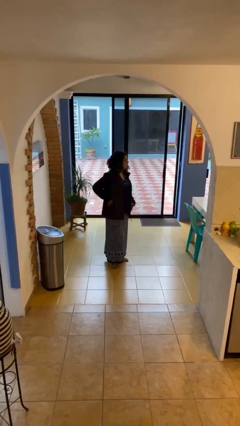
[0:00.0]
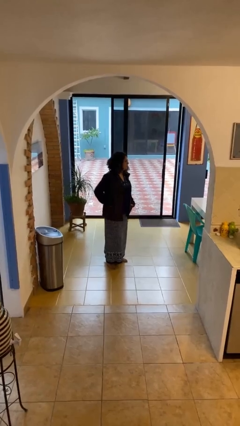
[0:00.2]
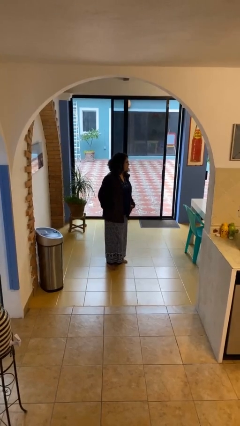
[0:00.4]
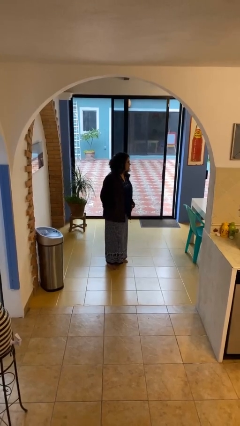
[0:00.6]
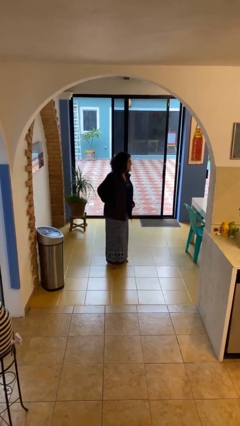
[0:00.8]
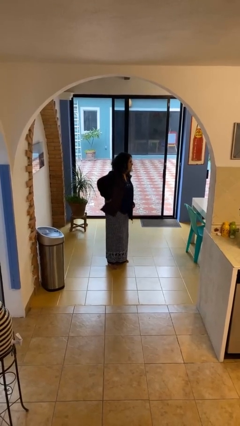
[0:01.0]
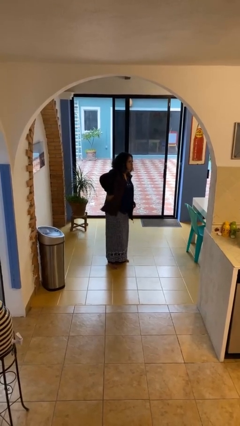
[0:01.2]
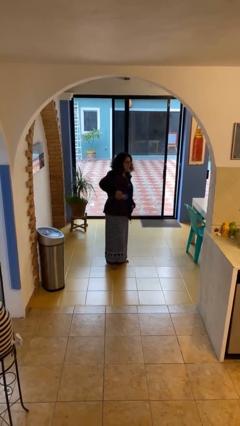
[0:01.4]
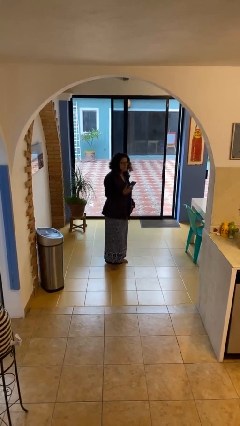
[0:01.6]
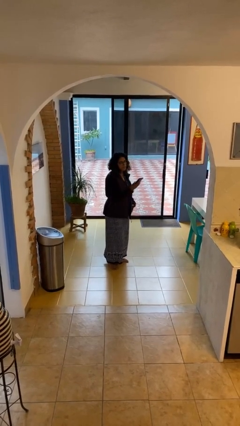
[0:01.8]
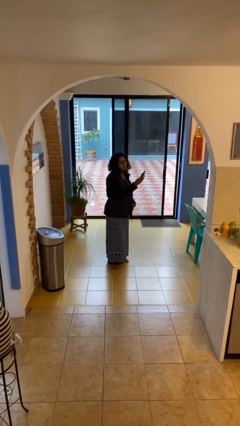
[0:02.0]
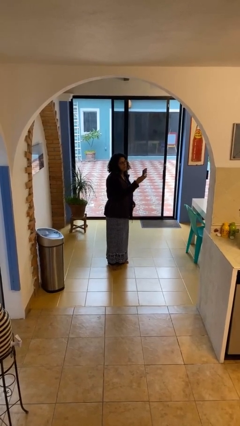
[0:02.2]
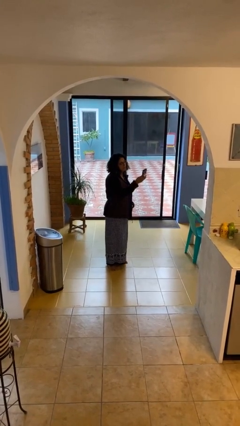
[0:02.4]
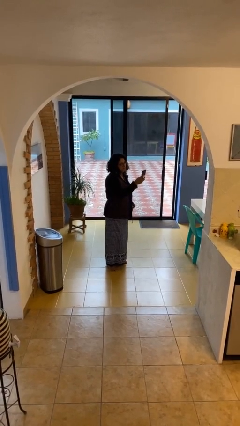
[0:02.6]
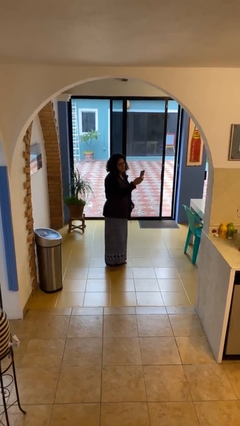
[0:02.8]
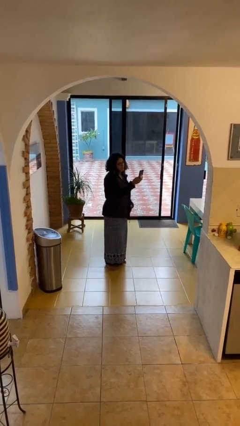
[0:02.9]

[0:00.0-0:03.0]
person takes phone from pocket

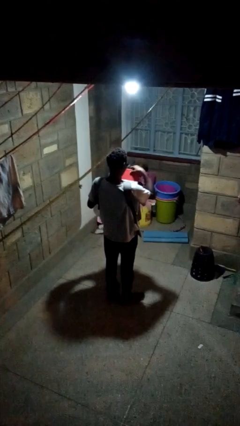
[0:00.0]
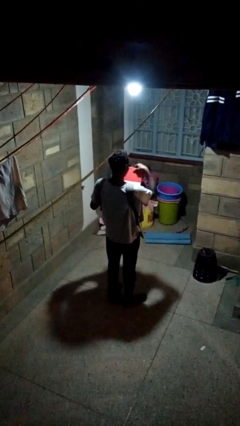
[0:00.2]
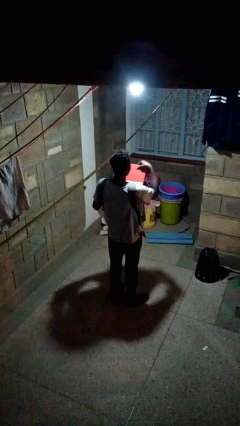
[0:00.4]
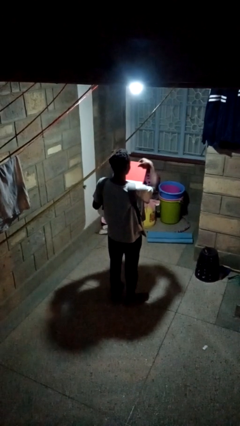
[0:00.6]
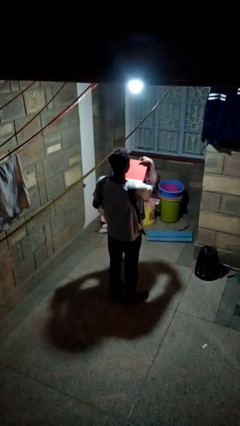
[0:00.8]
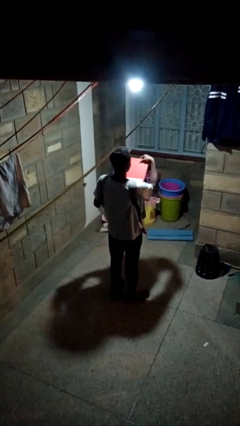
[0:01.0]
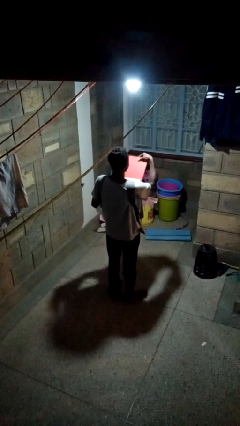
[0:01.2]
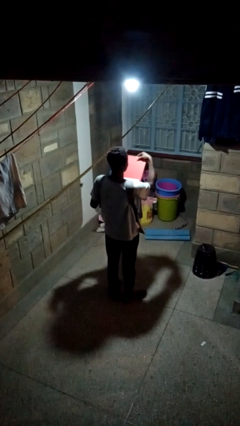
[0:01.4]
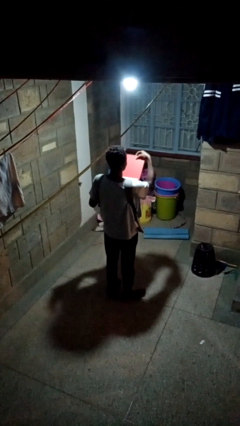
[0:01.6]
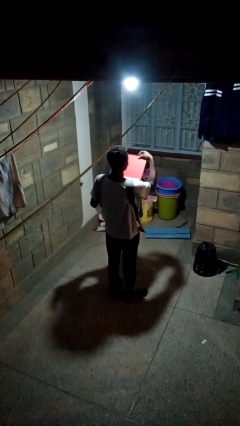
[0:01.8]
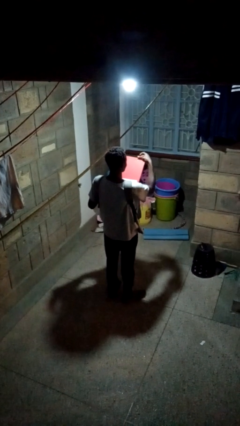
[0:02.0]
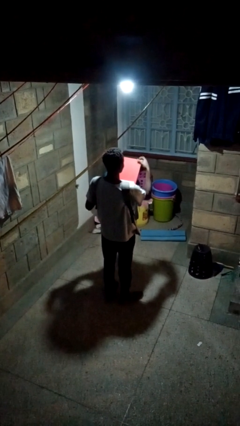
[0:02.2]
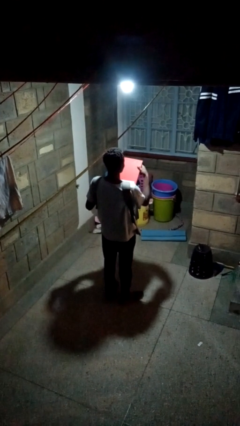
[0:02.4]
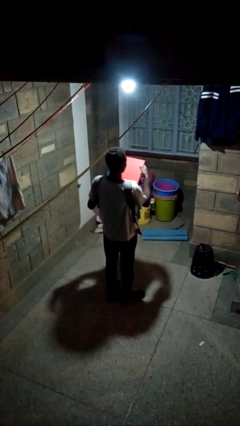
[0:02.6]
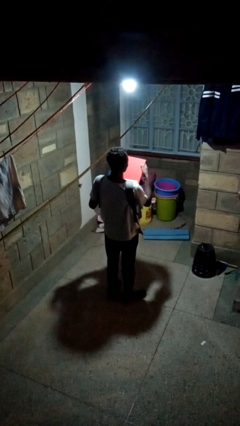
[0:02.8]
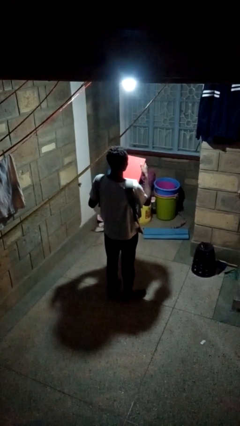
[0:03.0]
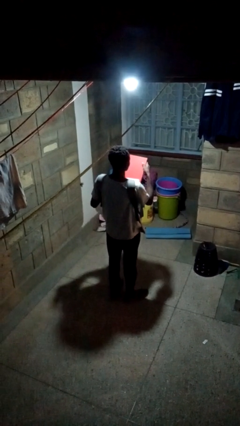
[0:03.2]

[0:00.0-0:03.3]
person takes object from backpack

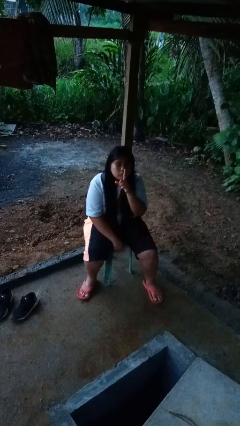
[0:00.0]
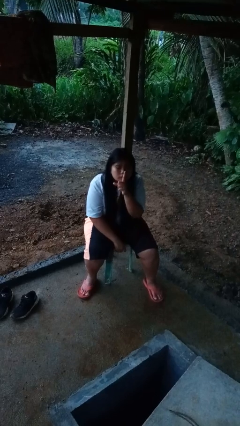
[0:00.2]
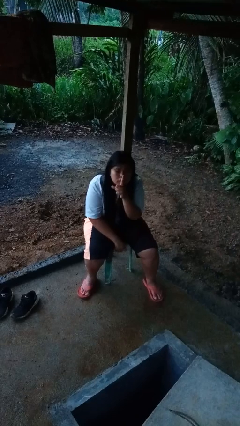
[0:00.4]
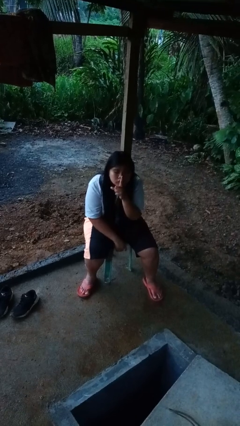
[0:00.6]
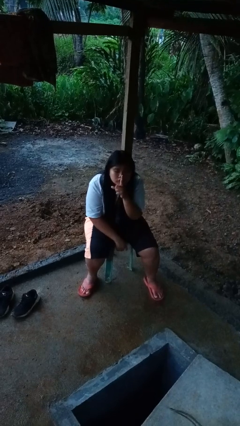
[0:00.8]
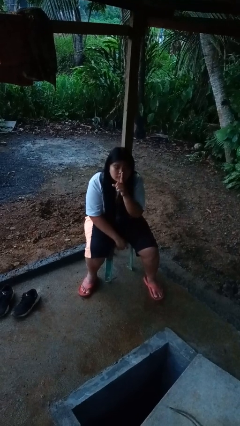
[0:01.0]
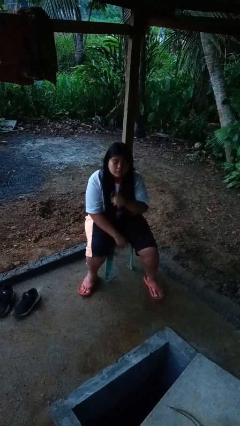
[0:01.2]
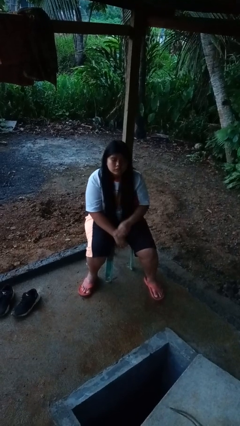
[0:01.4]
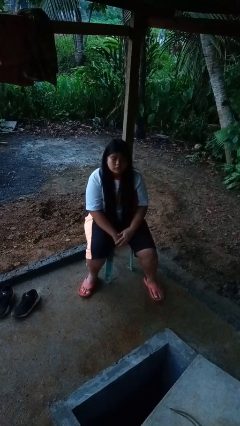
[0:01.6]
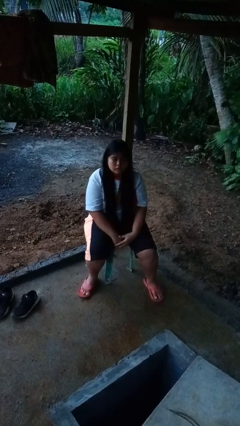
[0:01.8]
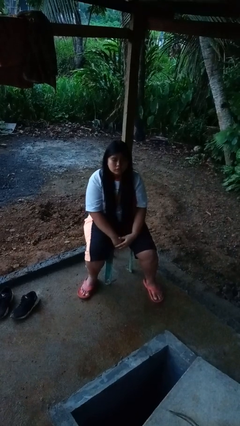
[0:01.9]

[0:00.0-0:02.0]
person gestures be quiet

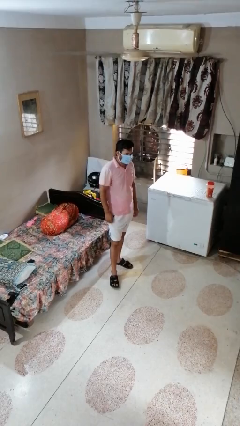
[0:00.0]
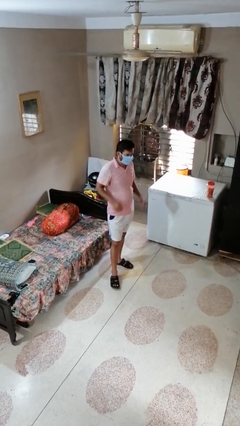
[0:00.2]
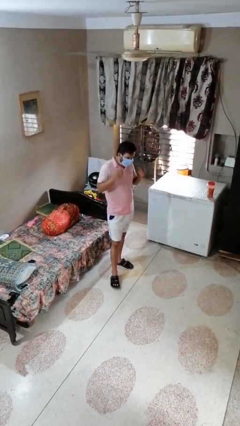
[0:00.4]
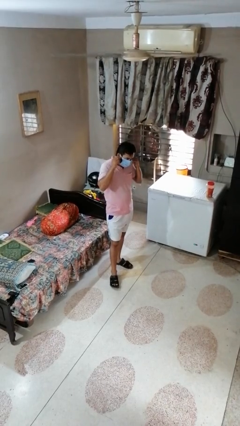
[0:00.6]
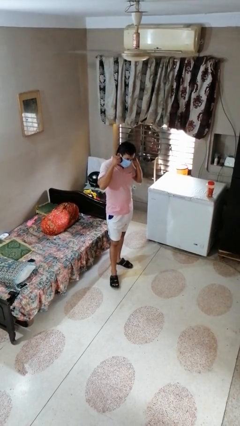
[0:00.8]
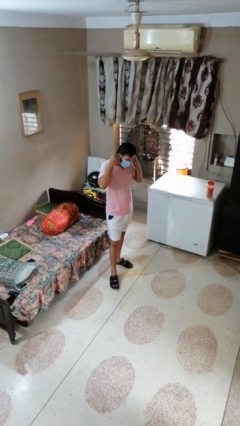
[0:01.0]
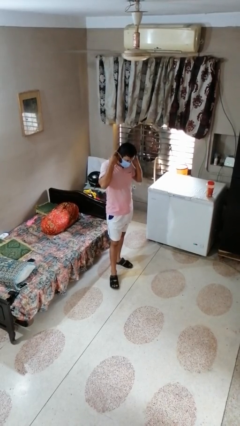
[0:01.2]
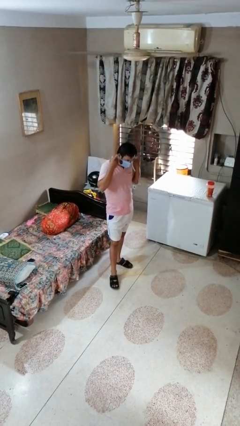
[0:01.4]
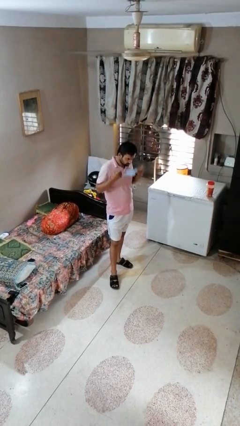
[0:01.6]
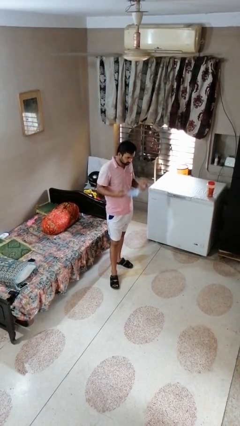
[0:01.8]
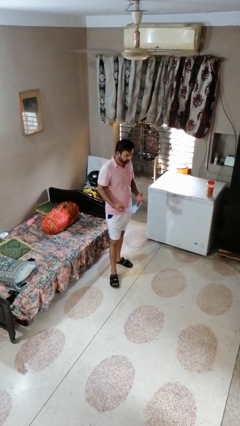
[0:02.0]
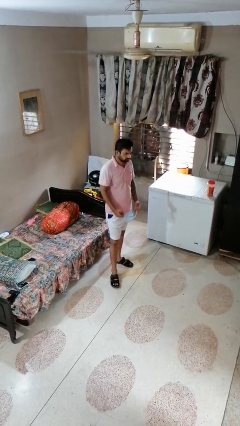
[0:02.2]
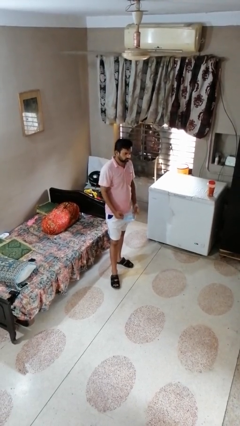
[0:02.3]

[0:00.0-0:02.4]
person takes off facemask

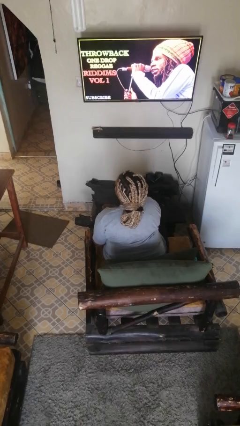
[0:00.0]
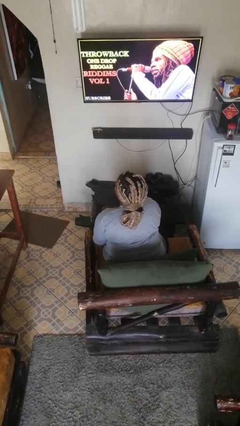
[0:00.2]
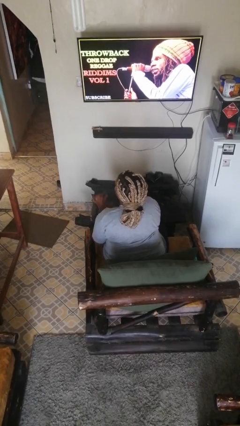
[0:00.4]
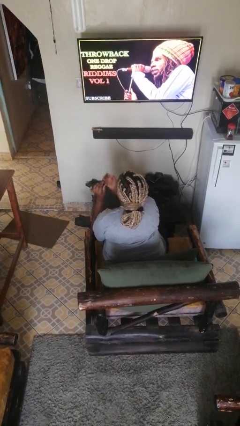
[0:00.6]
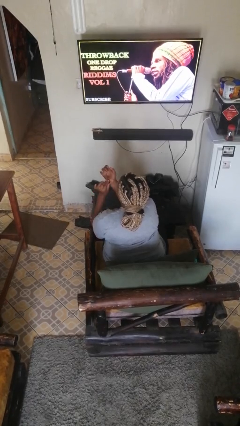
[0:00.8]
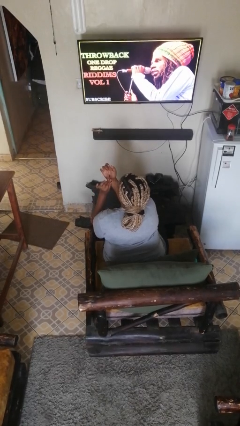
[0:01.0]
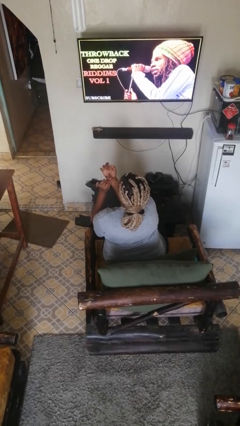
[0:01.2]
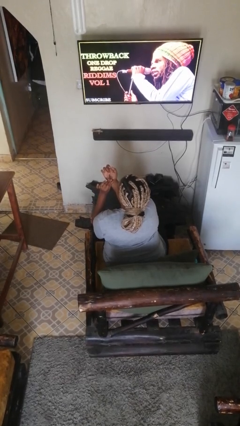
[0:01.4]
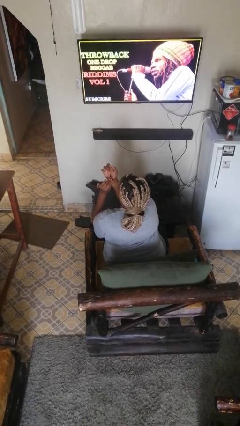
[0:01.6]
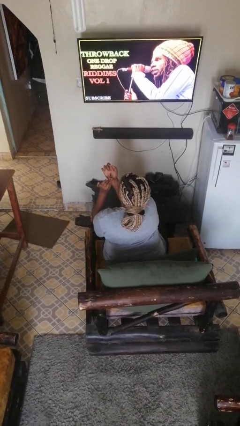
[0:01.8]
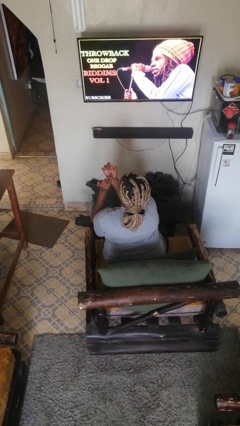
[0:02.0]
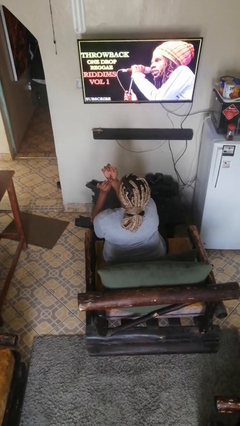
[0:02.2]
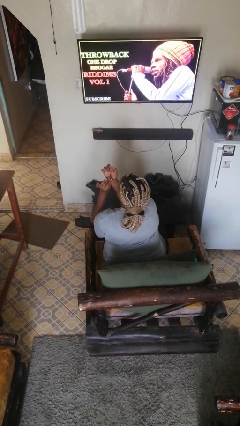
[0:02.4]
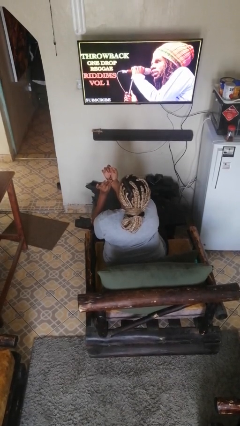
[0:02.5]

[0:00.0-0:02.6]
person paints fingernails

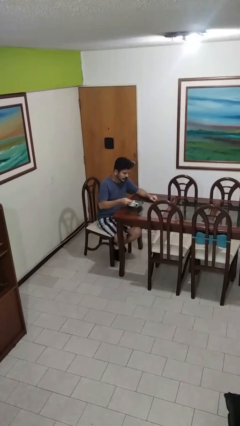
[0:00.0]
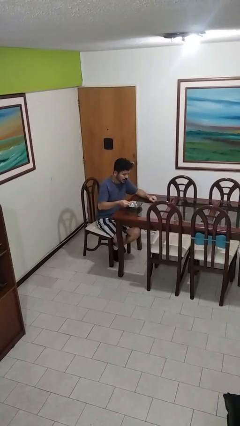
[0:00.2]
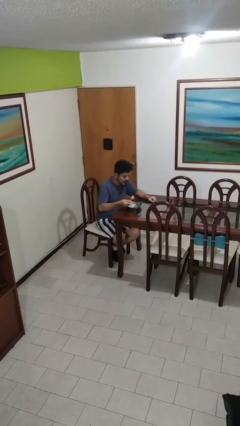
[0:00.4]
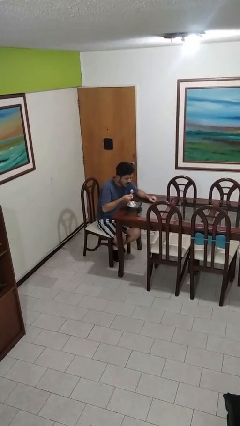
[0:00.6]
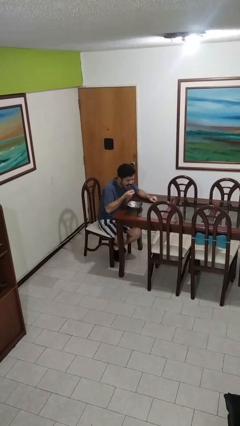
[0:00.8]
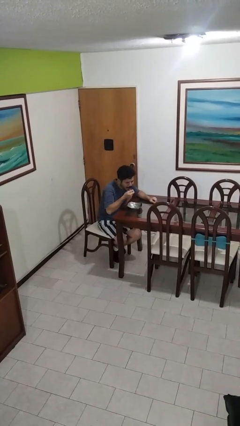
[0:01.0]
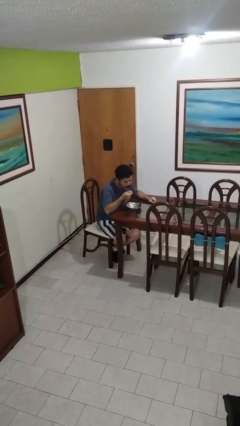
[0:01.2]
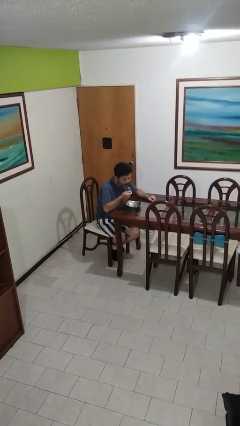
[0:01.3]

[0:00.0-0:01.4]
person eats with utensil

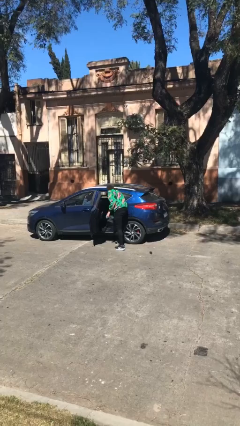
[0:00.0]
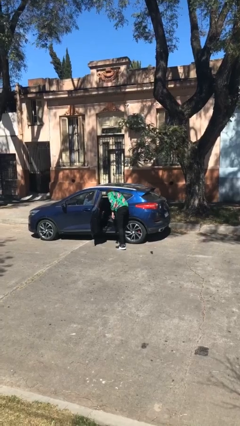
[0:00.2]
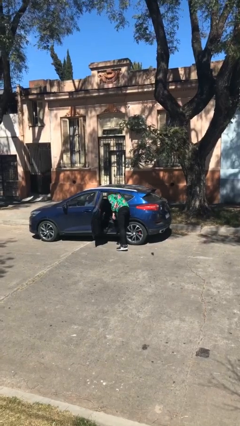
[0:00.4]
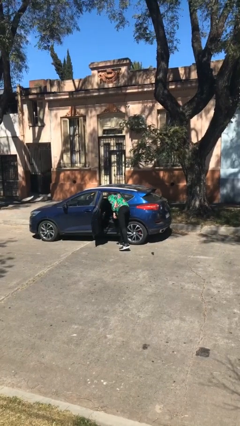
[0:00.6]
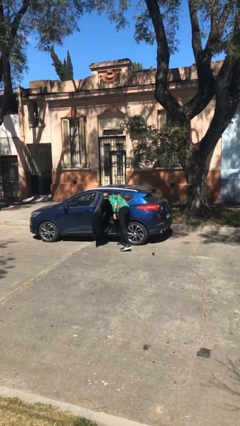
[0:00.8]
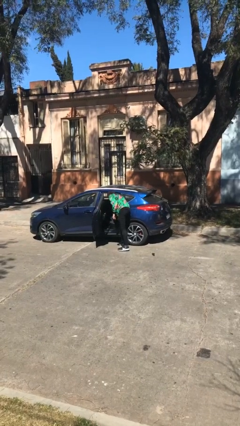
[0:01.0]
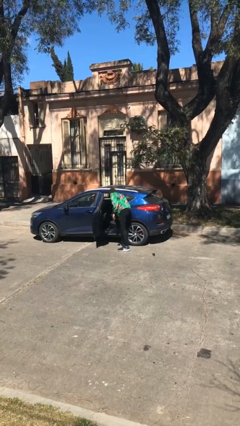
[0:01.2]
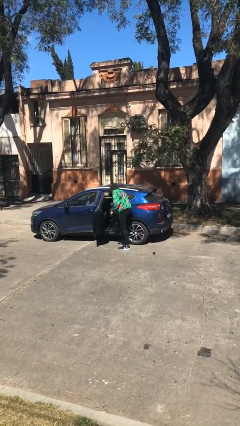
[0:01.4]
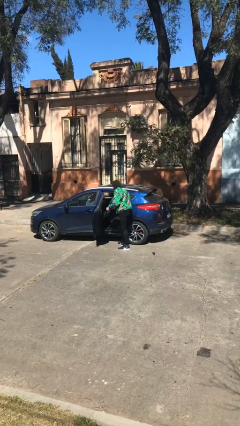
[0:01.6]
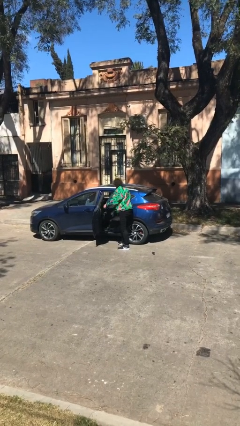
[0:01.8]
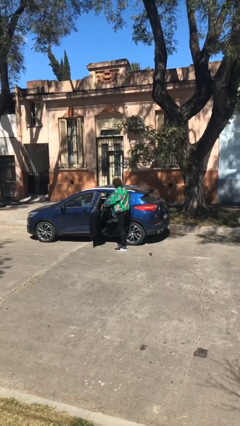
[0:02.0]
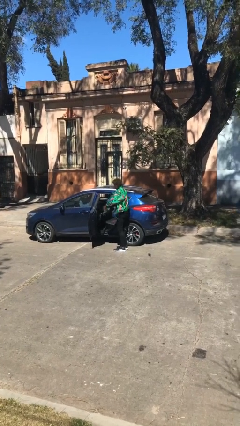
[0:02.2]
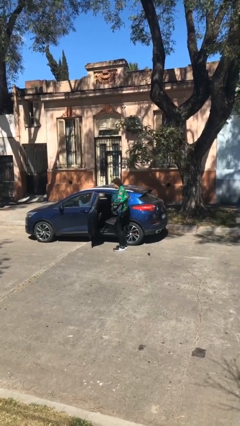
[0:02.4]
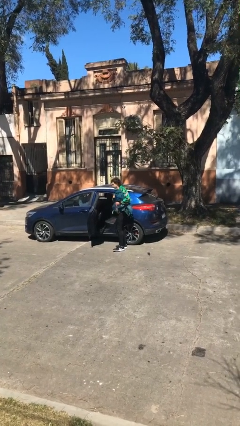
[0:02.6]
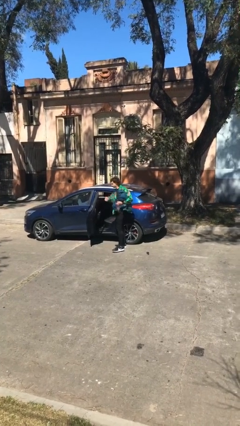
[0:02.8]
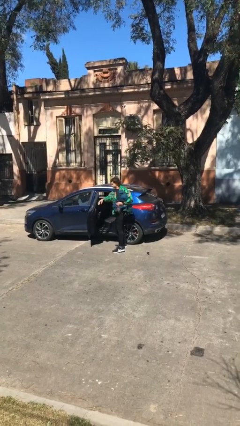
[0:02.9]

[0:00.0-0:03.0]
person unloads car
